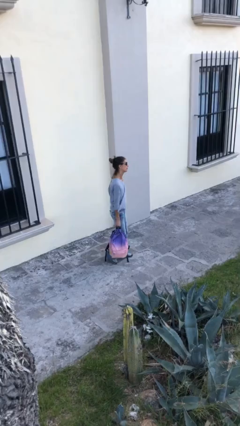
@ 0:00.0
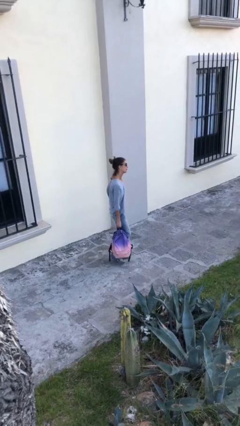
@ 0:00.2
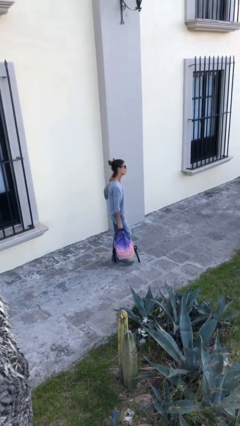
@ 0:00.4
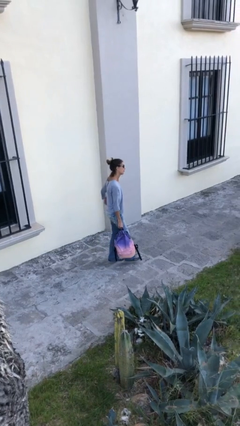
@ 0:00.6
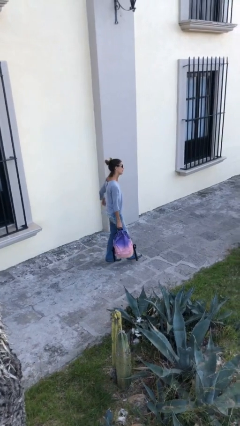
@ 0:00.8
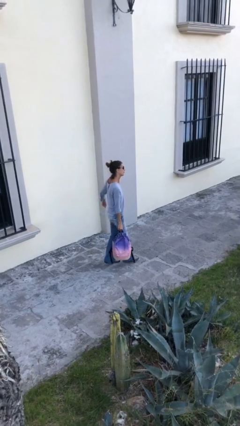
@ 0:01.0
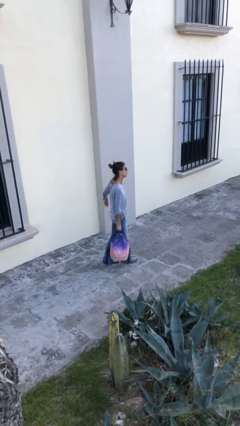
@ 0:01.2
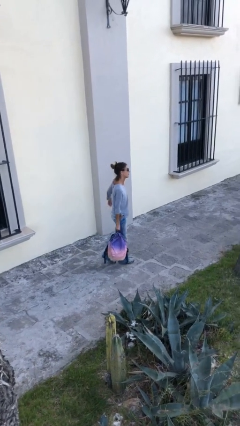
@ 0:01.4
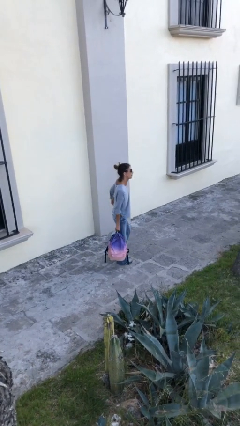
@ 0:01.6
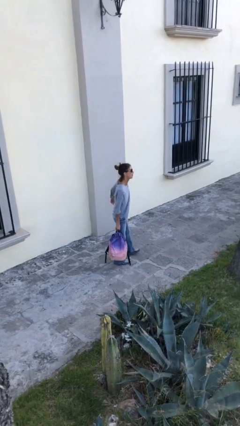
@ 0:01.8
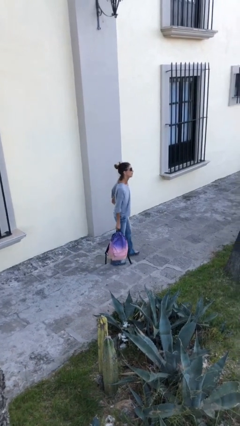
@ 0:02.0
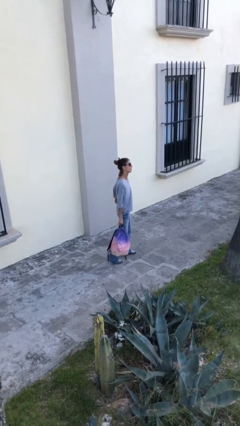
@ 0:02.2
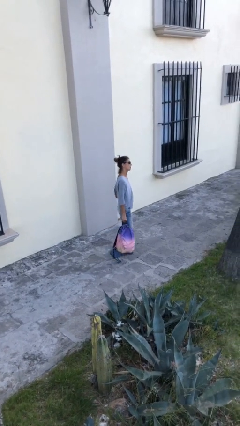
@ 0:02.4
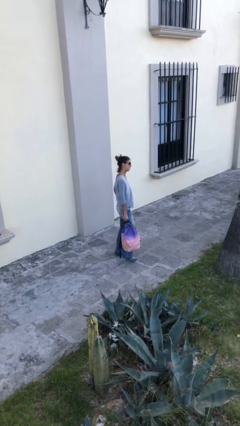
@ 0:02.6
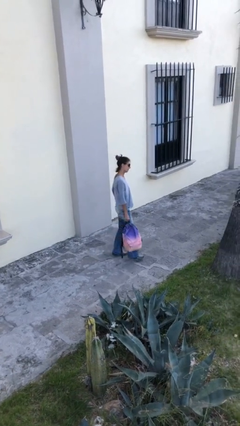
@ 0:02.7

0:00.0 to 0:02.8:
person carries heavy object

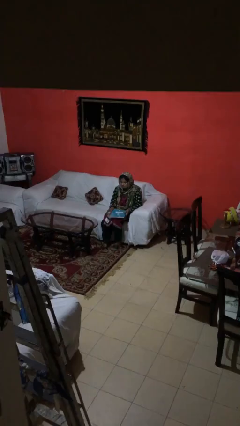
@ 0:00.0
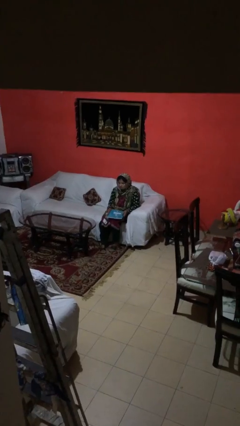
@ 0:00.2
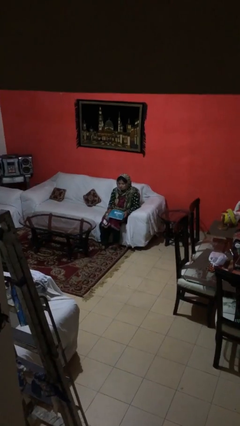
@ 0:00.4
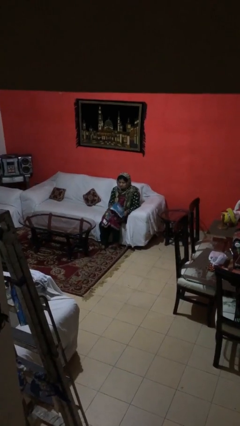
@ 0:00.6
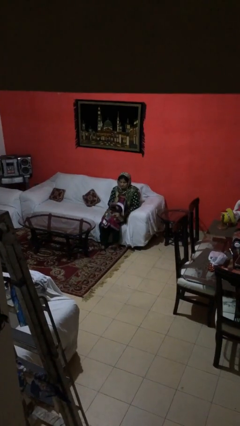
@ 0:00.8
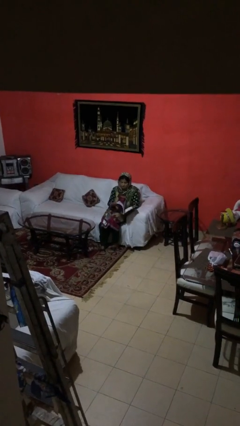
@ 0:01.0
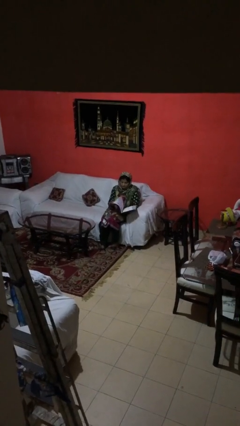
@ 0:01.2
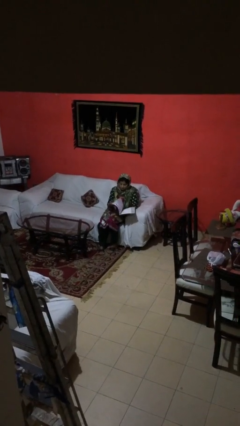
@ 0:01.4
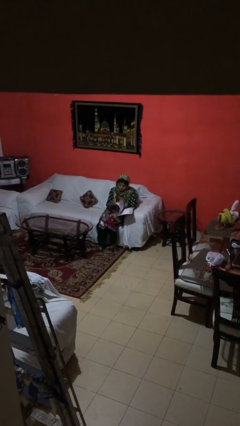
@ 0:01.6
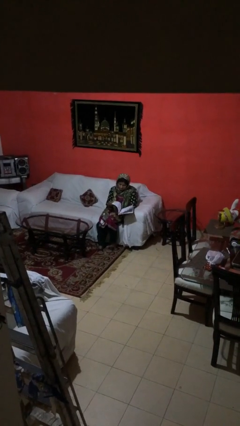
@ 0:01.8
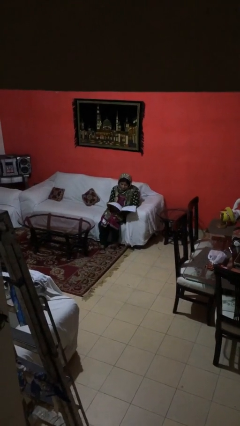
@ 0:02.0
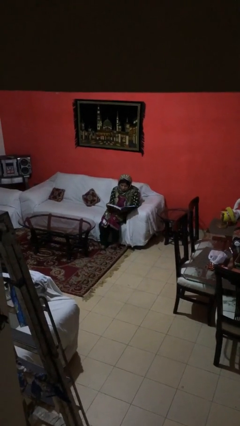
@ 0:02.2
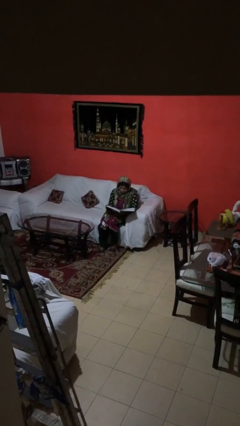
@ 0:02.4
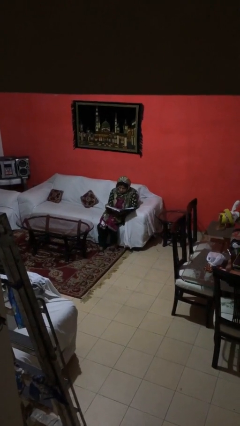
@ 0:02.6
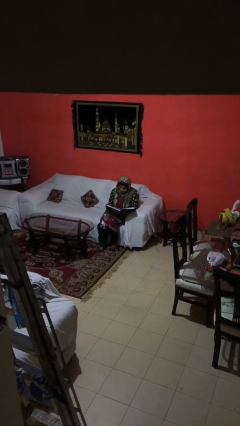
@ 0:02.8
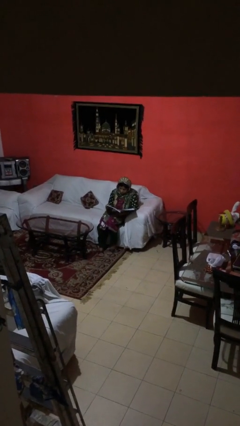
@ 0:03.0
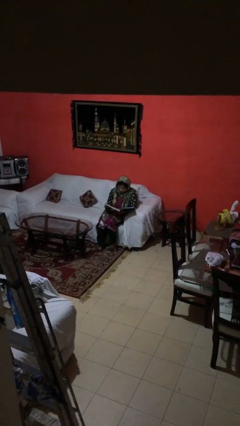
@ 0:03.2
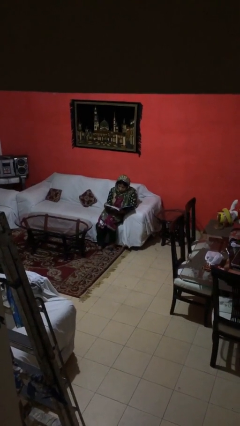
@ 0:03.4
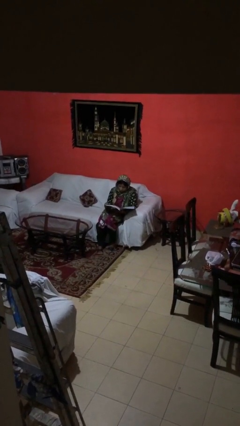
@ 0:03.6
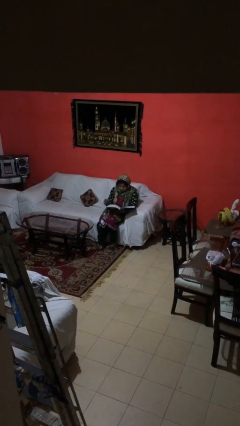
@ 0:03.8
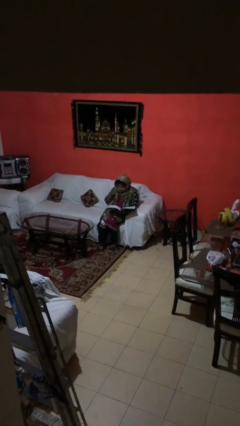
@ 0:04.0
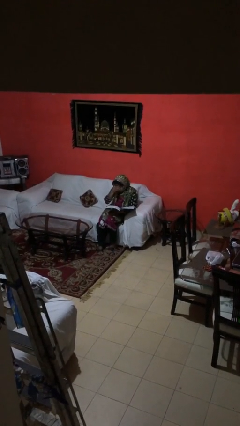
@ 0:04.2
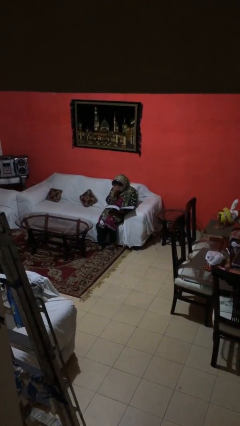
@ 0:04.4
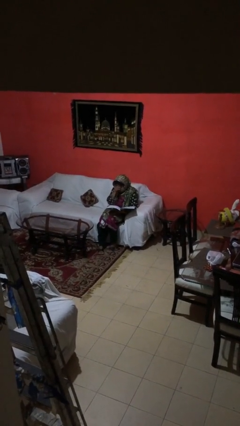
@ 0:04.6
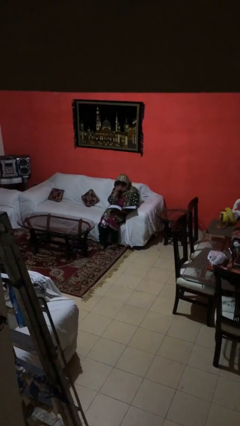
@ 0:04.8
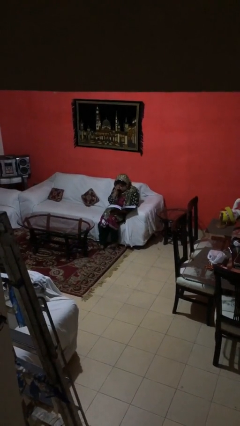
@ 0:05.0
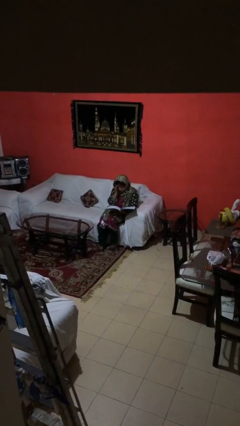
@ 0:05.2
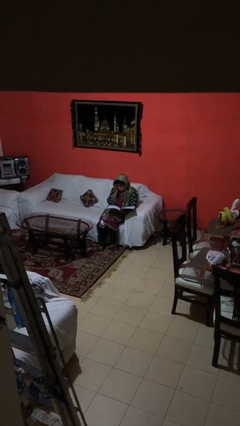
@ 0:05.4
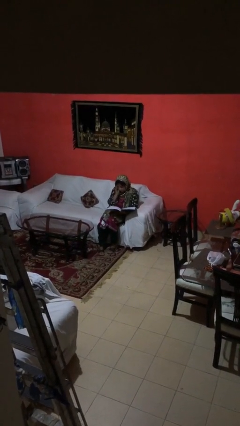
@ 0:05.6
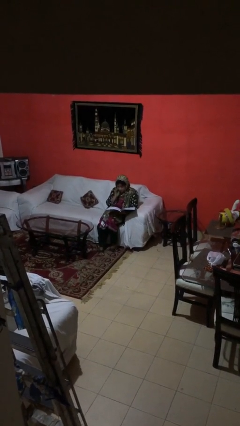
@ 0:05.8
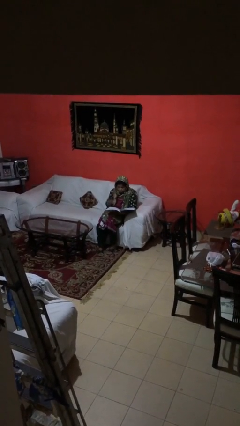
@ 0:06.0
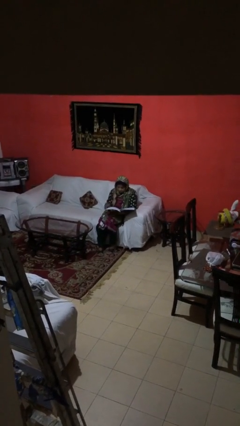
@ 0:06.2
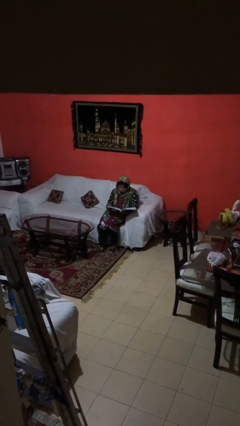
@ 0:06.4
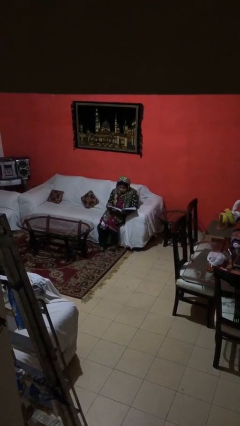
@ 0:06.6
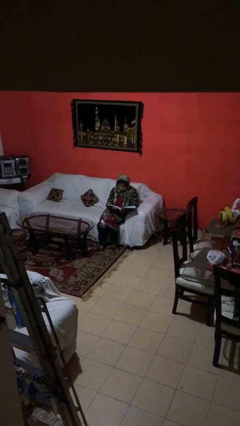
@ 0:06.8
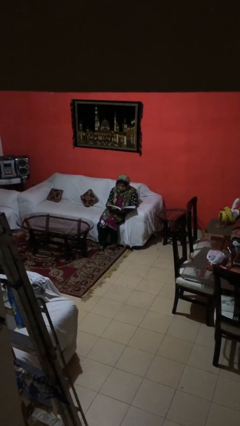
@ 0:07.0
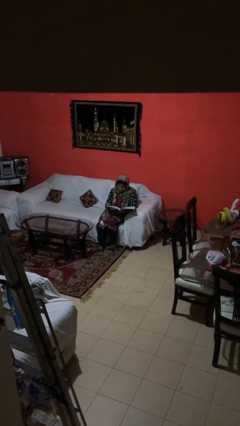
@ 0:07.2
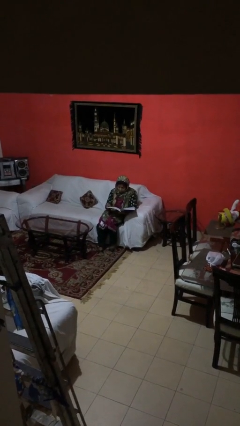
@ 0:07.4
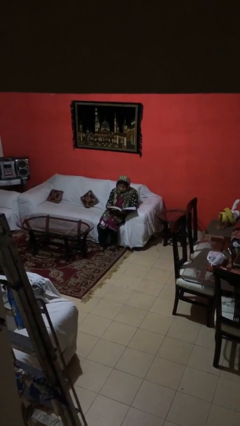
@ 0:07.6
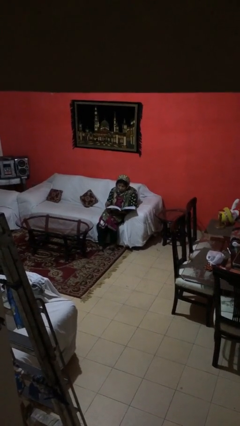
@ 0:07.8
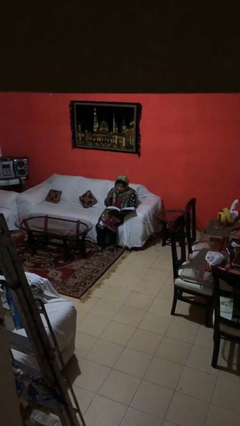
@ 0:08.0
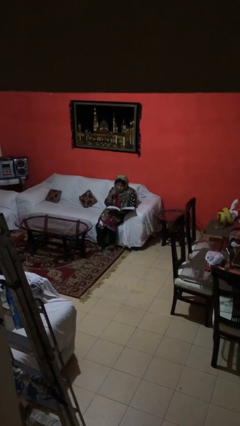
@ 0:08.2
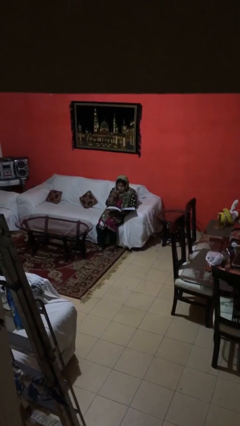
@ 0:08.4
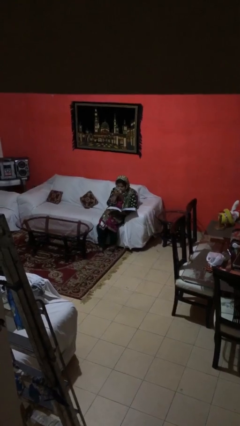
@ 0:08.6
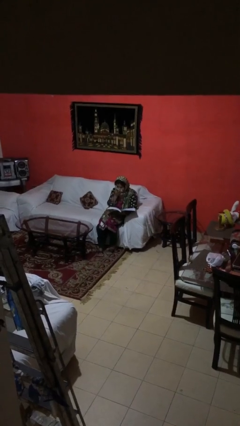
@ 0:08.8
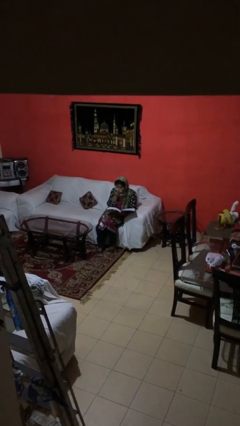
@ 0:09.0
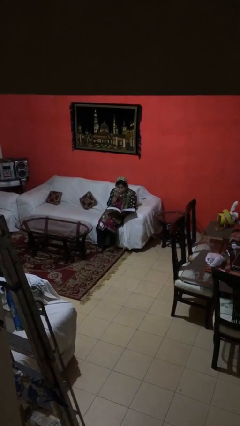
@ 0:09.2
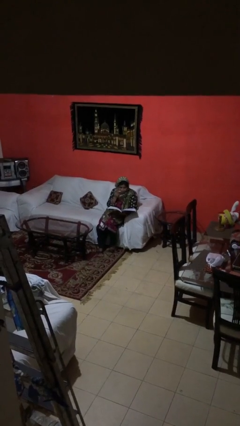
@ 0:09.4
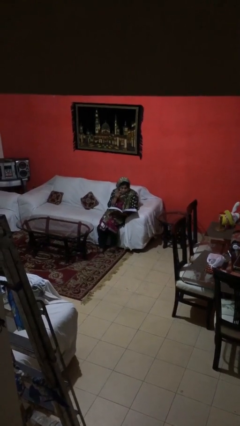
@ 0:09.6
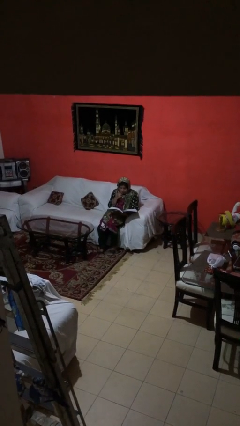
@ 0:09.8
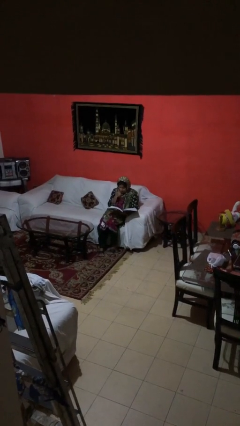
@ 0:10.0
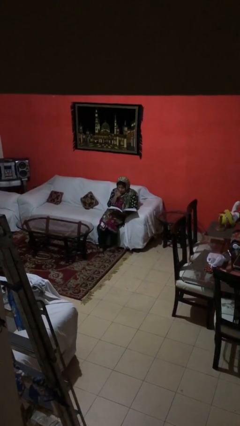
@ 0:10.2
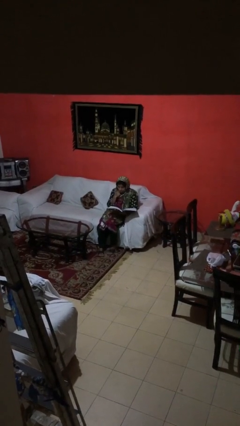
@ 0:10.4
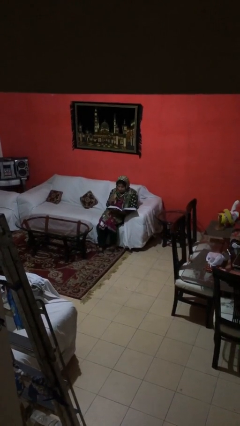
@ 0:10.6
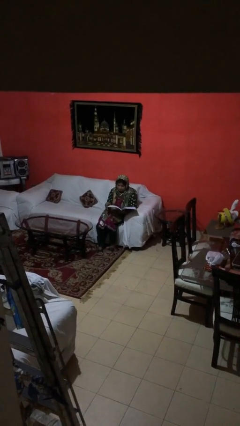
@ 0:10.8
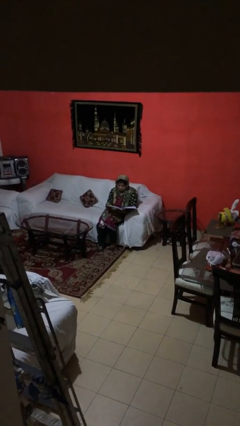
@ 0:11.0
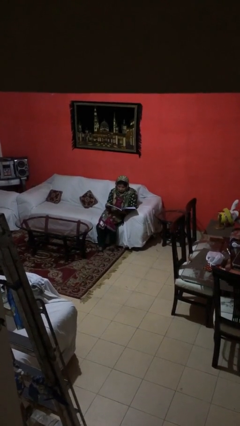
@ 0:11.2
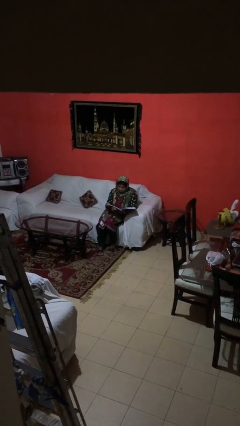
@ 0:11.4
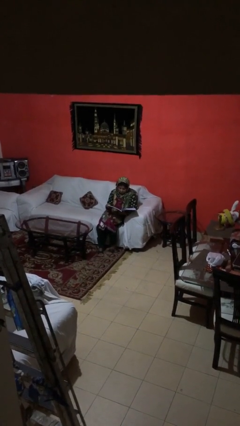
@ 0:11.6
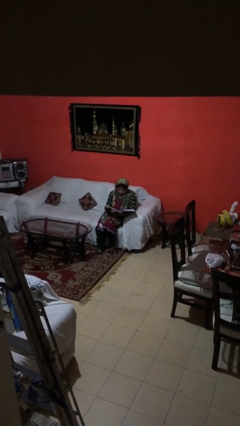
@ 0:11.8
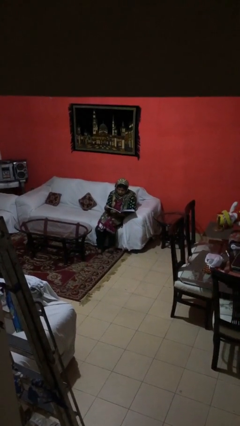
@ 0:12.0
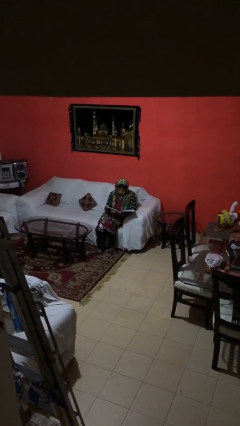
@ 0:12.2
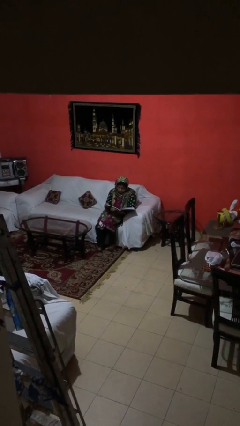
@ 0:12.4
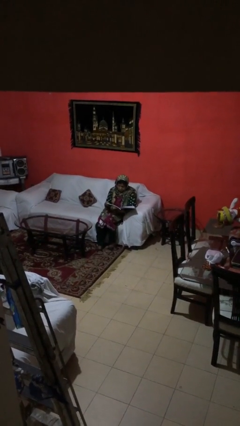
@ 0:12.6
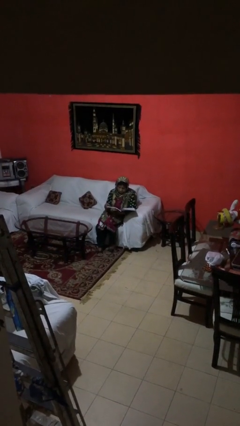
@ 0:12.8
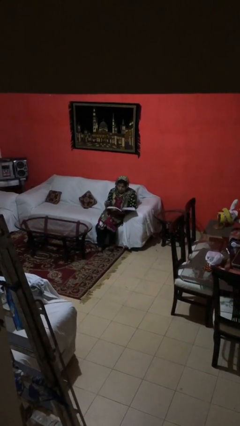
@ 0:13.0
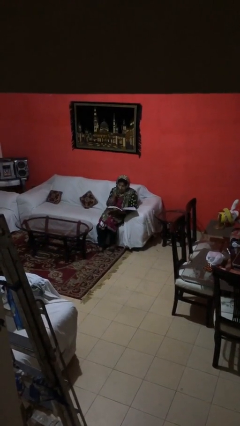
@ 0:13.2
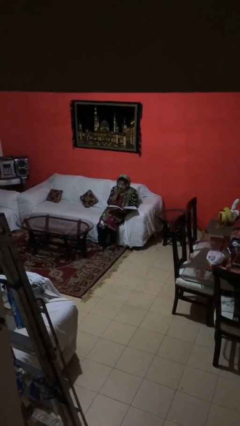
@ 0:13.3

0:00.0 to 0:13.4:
person reads document

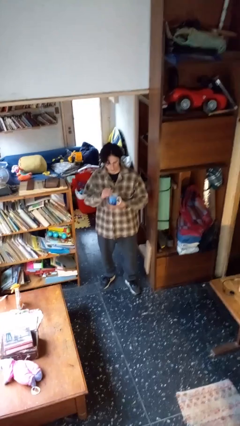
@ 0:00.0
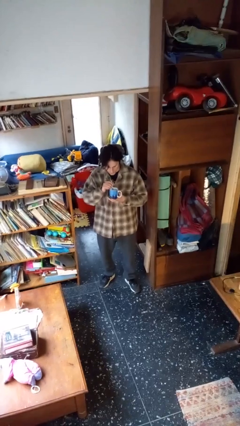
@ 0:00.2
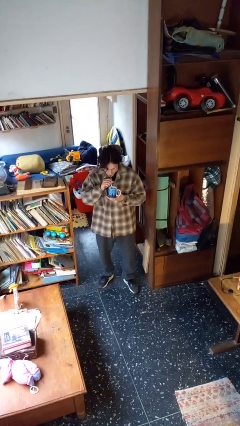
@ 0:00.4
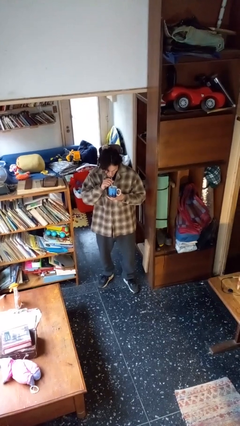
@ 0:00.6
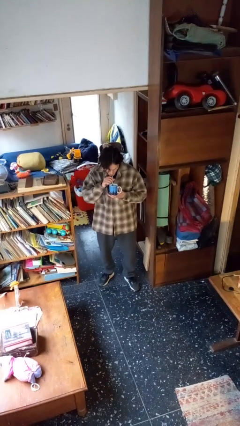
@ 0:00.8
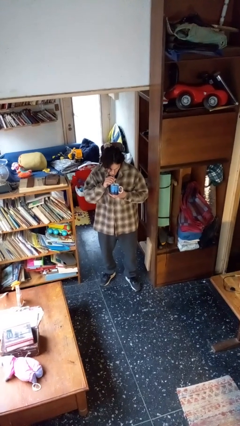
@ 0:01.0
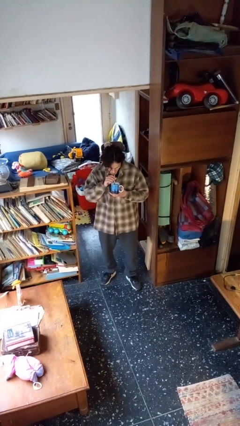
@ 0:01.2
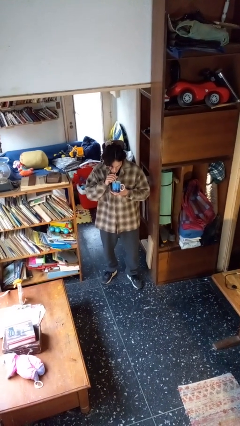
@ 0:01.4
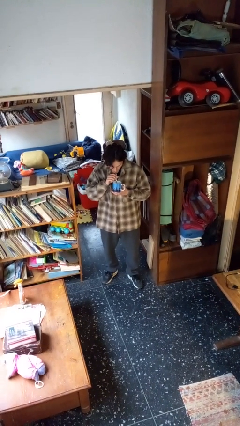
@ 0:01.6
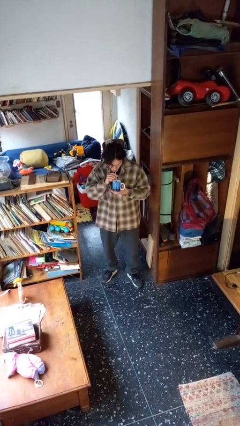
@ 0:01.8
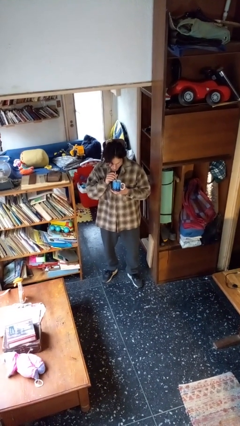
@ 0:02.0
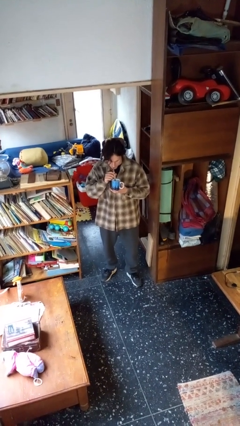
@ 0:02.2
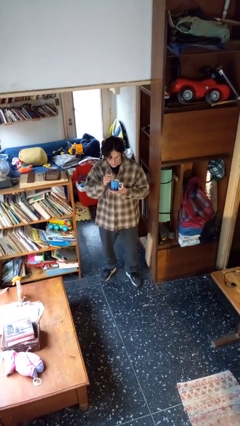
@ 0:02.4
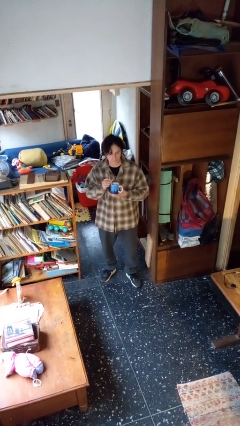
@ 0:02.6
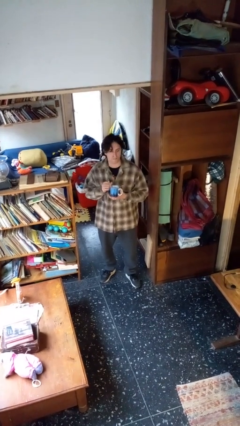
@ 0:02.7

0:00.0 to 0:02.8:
person drinks from straw
